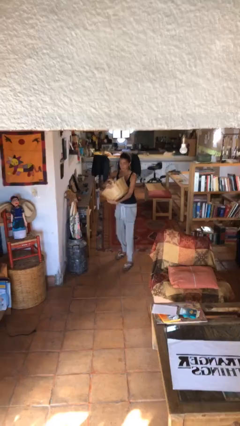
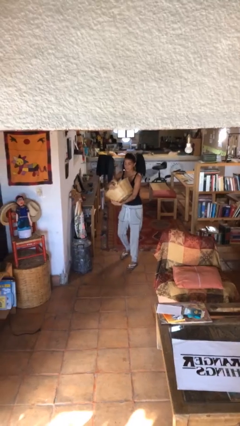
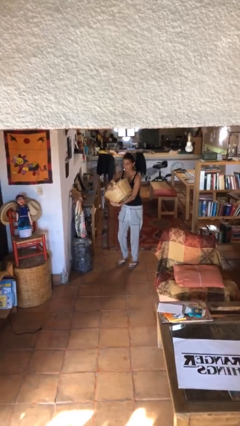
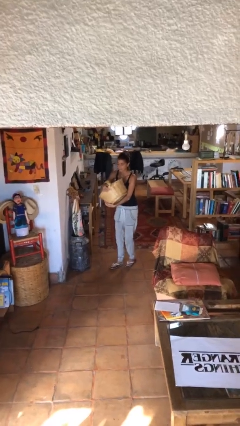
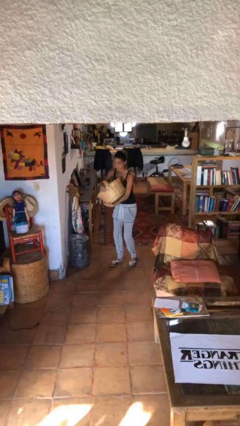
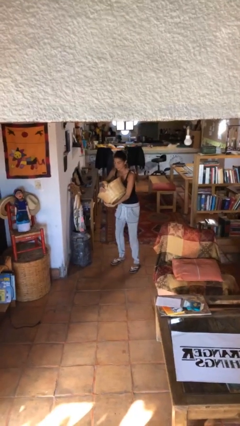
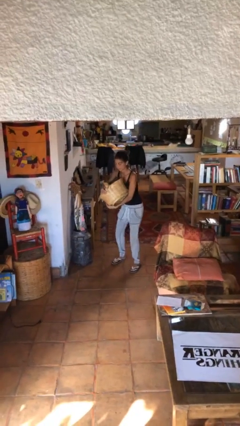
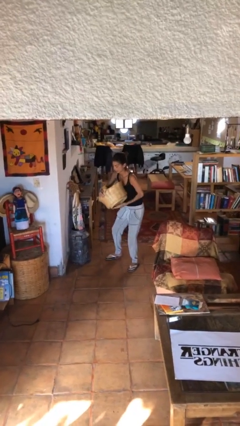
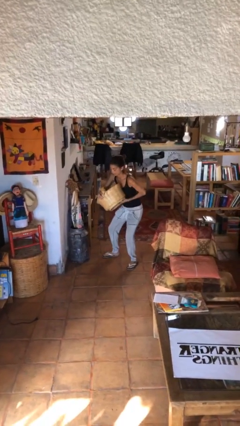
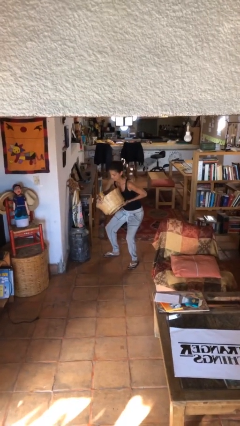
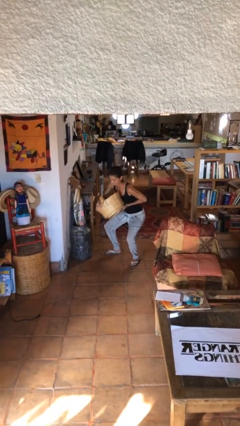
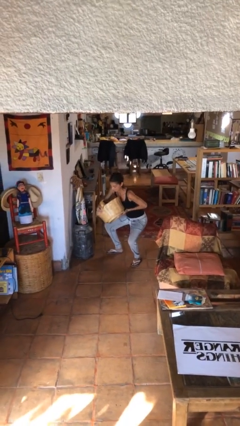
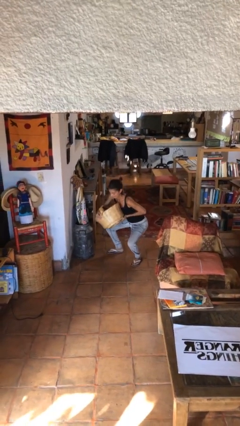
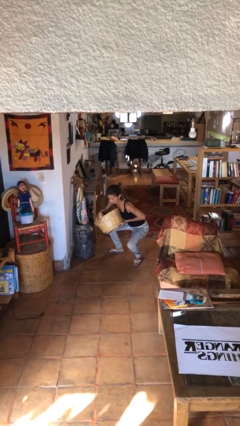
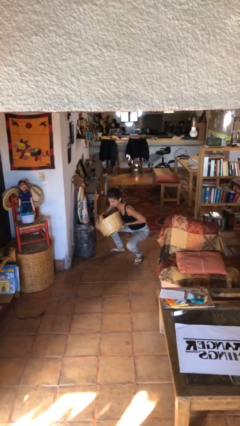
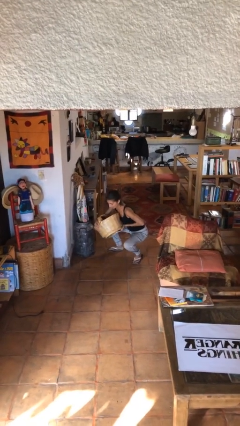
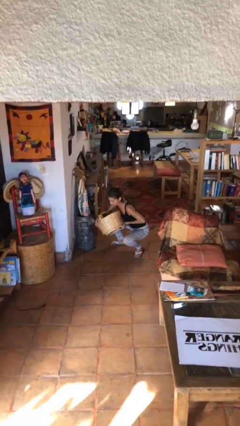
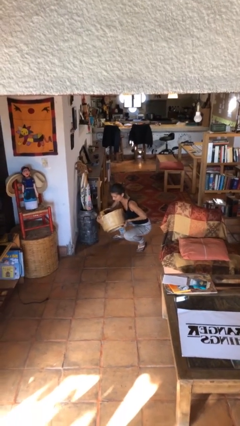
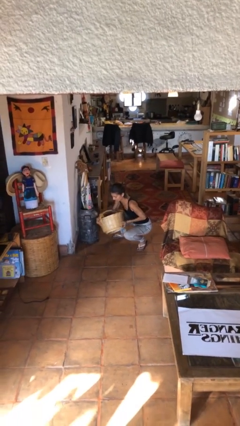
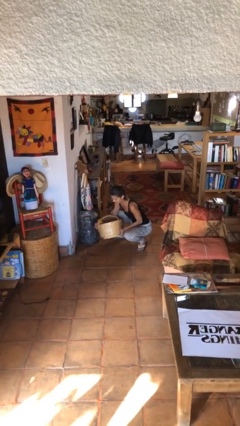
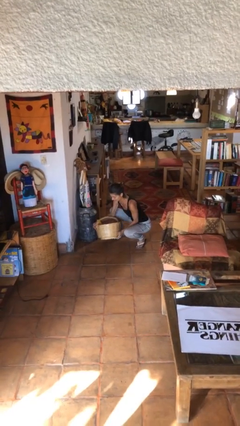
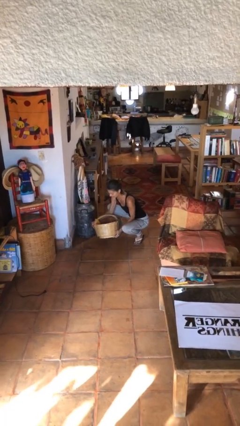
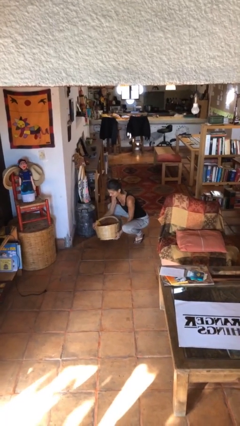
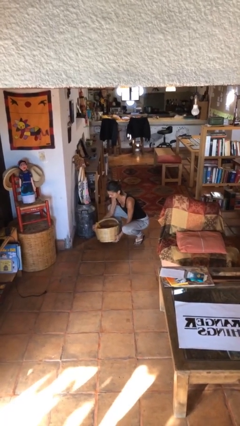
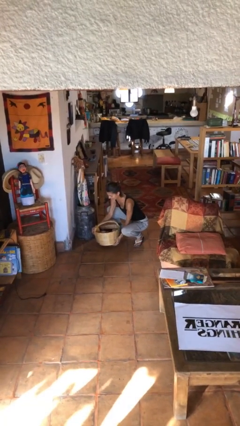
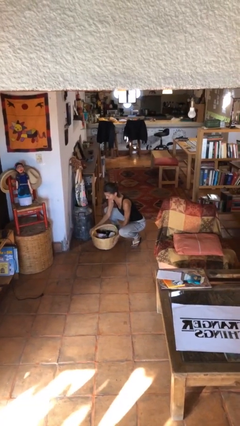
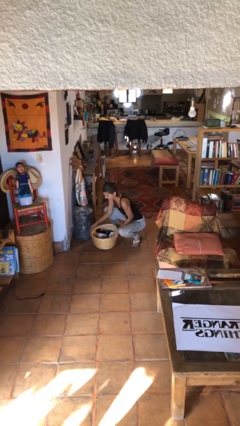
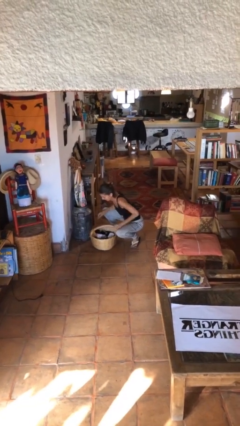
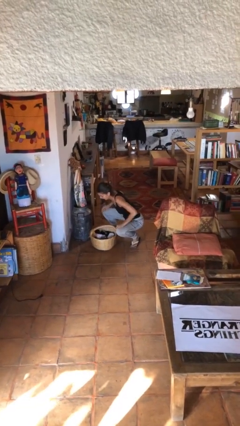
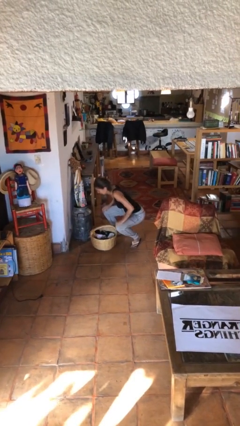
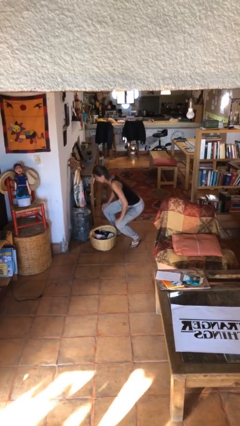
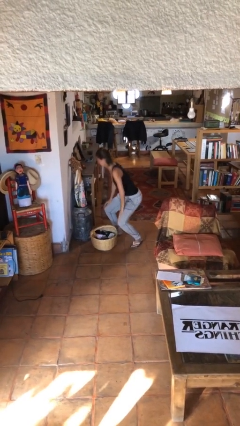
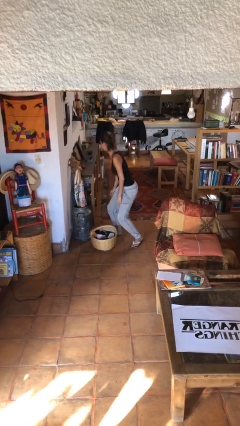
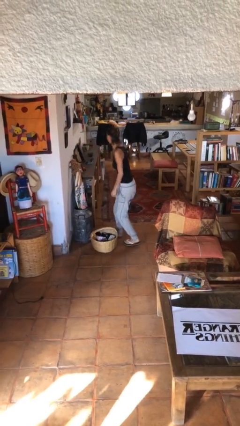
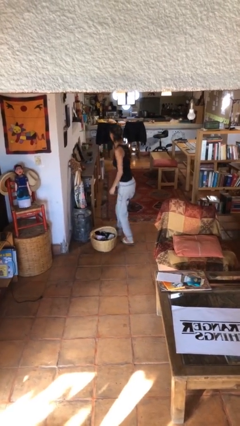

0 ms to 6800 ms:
person puts down object on floor

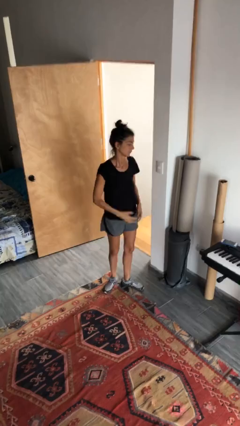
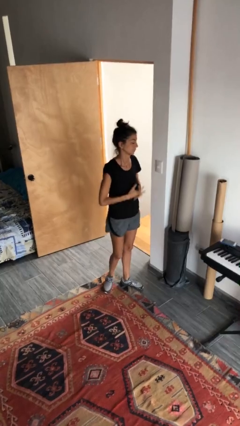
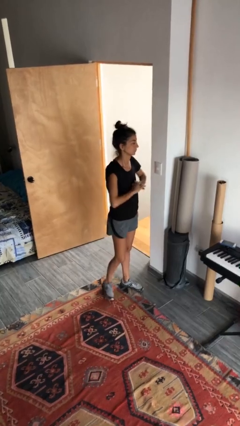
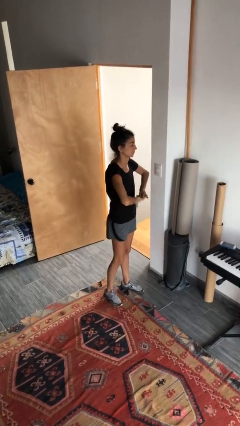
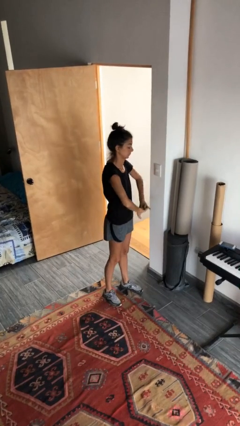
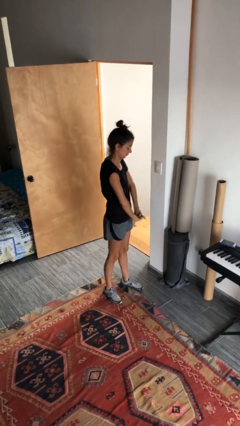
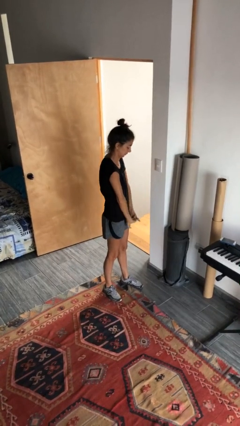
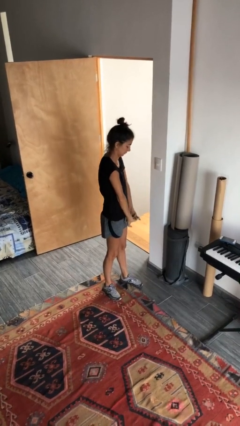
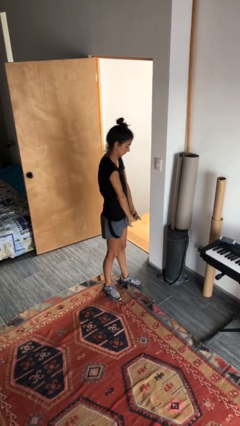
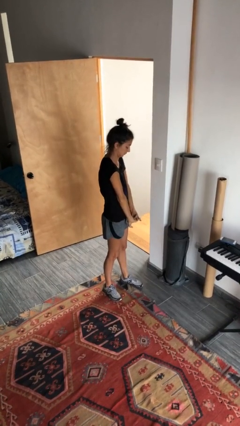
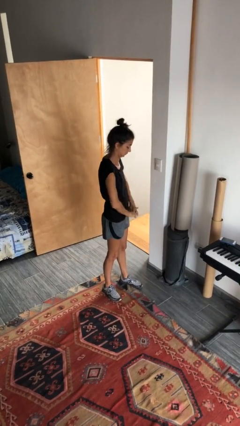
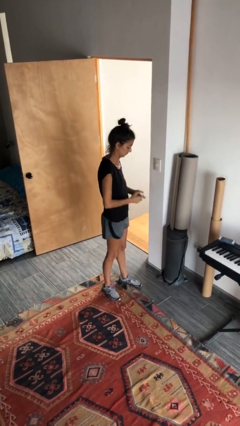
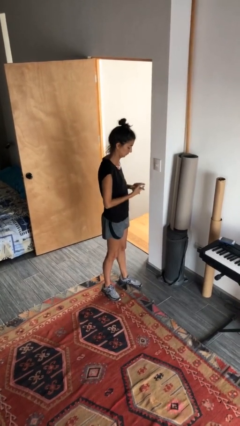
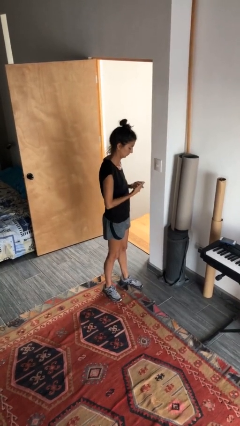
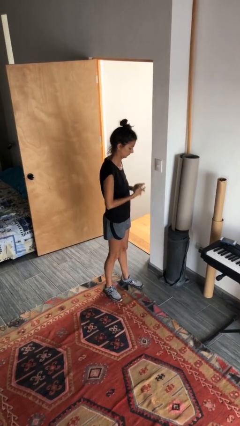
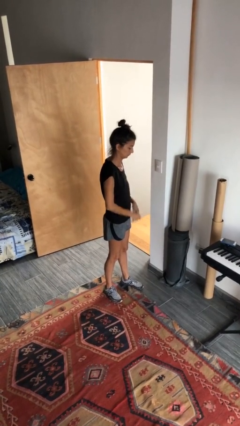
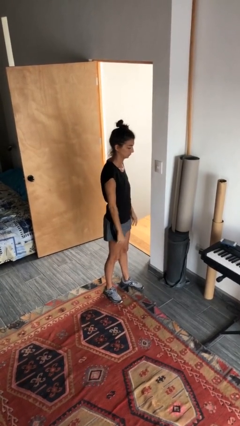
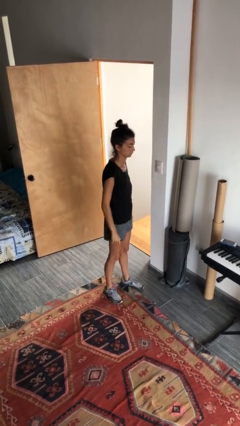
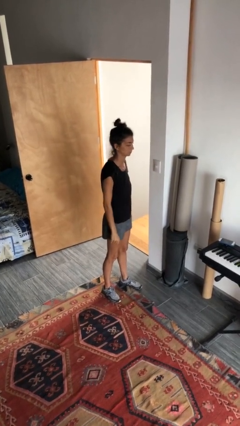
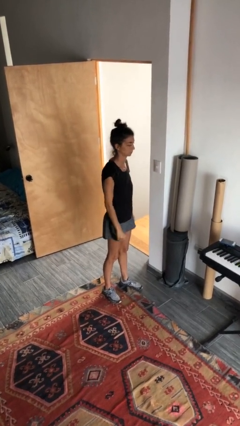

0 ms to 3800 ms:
person cracks knuckles

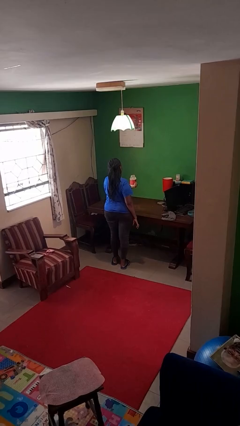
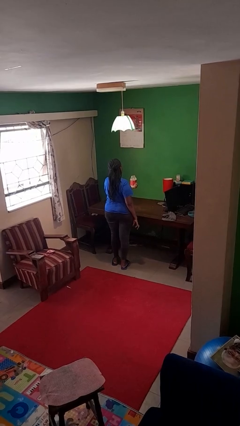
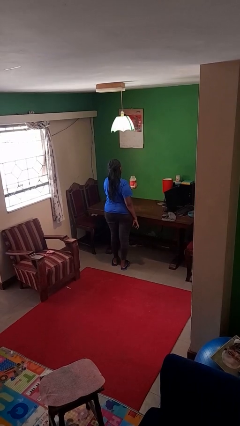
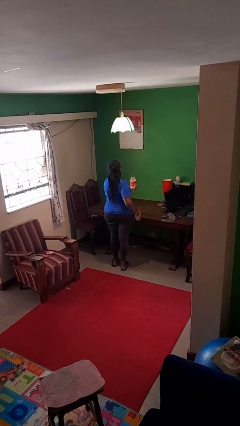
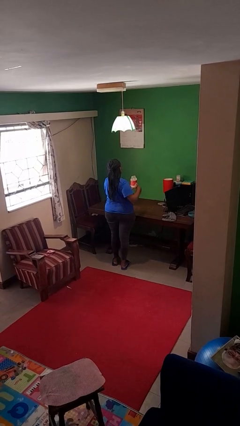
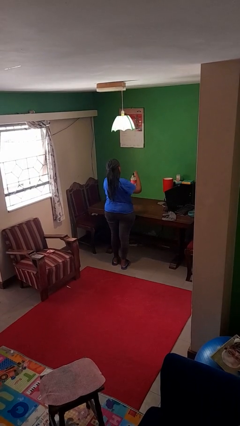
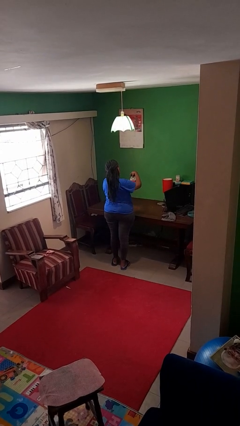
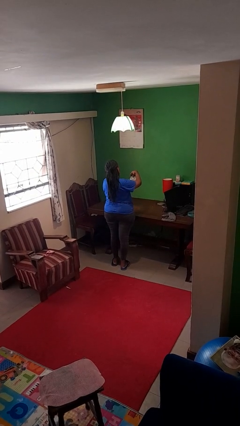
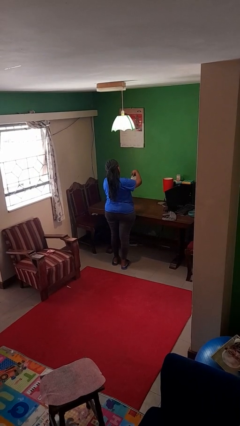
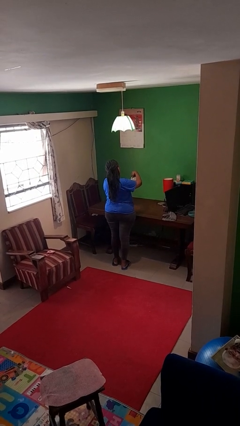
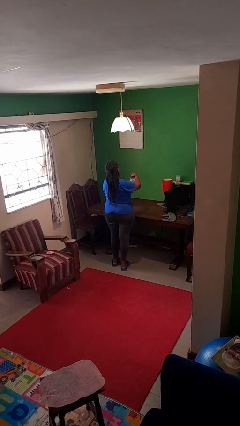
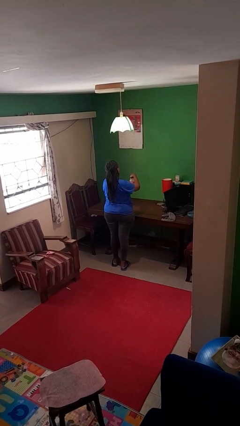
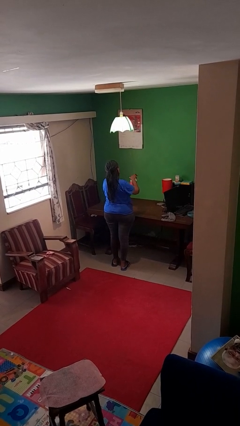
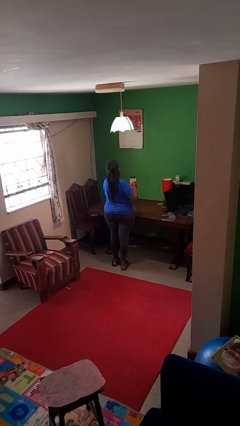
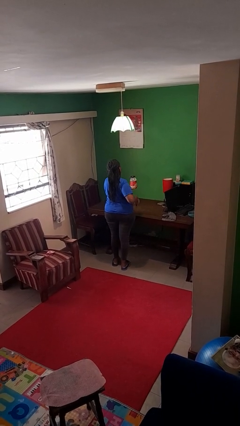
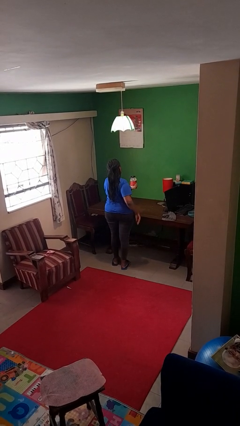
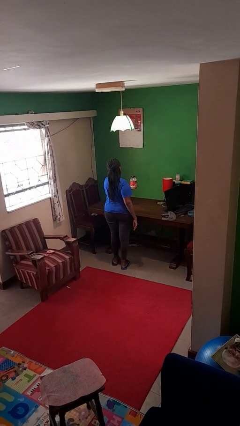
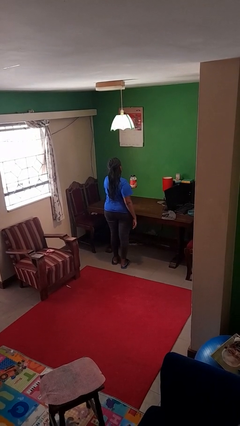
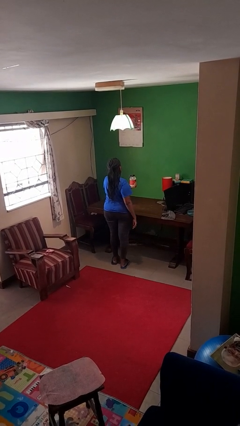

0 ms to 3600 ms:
person closes jar

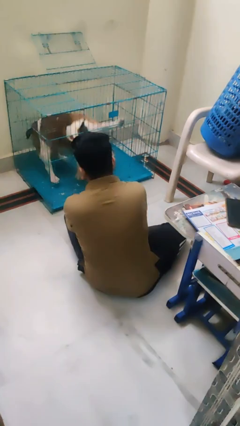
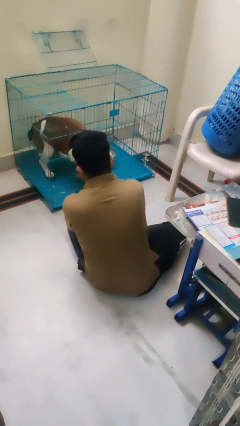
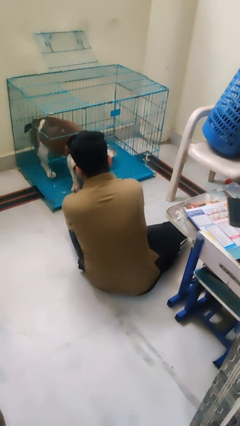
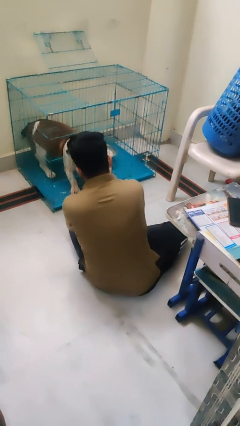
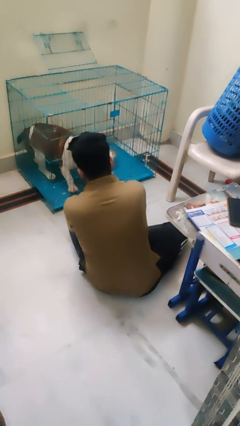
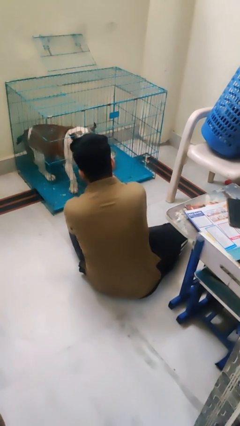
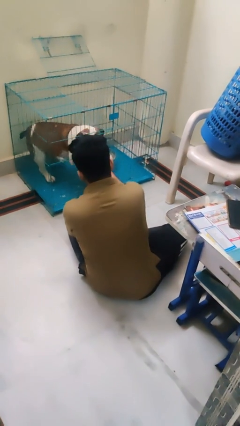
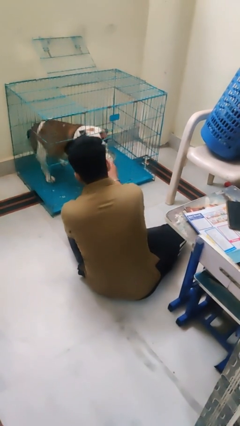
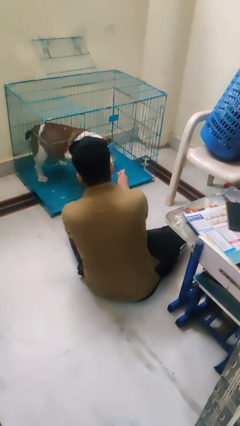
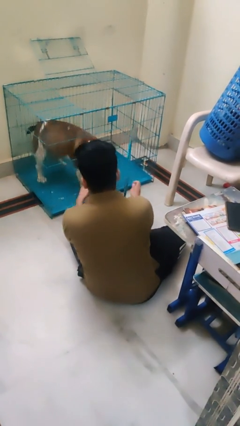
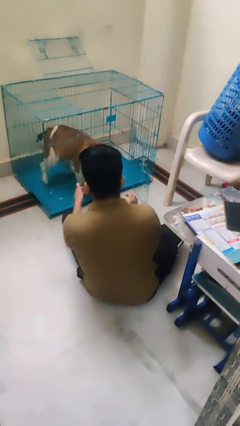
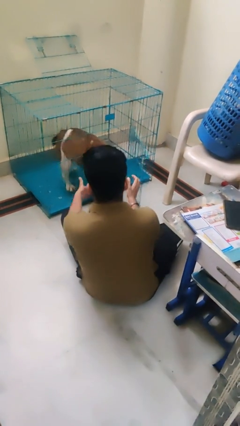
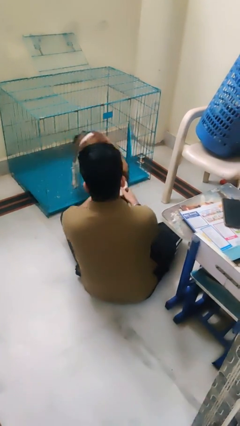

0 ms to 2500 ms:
person uncrates dog

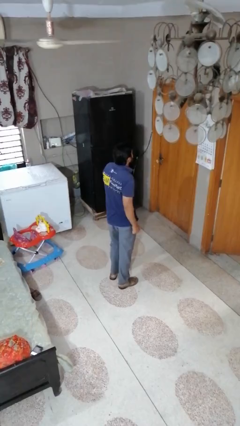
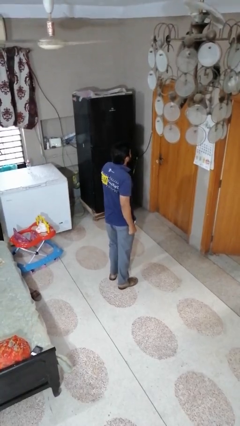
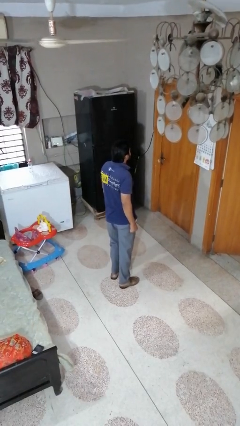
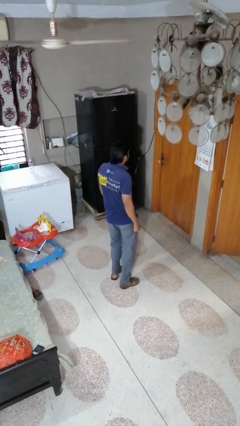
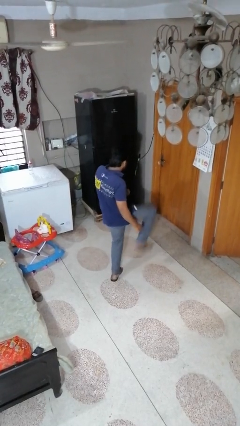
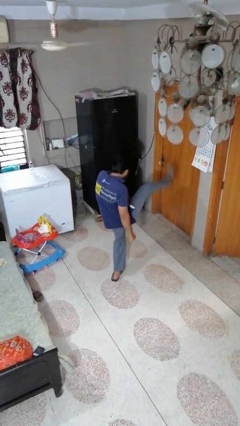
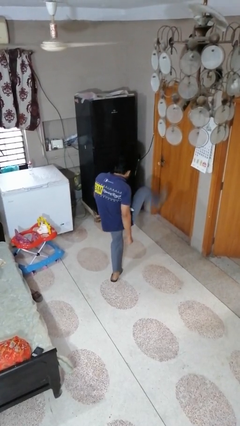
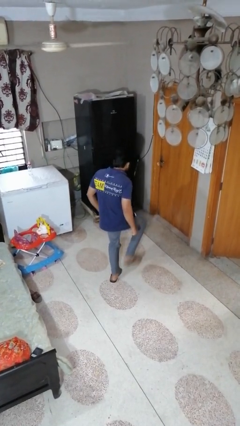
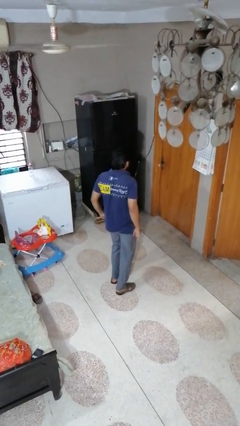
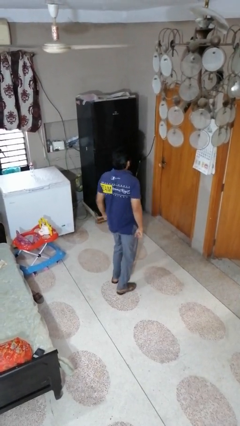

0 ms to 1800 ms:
person karate kicks
